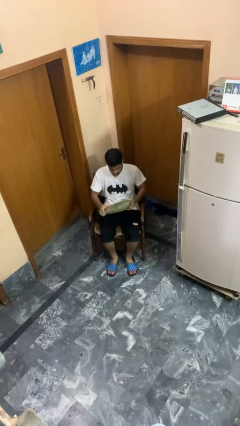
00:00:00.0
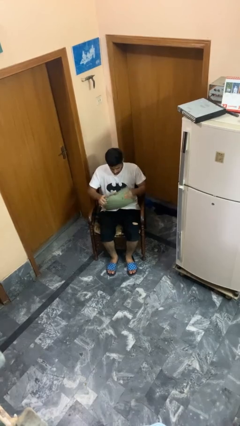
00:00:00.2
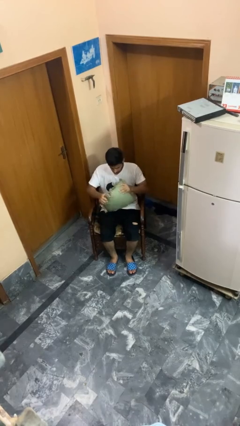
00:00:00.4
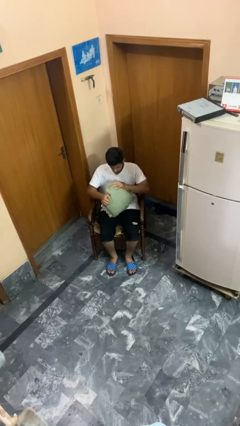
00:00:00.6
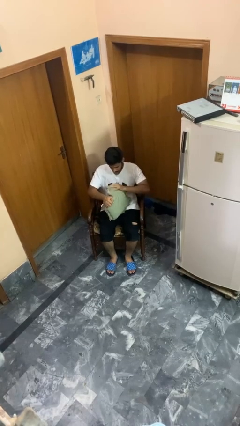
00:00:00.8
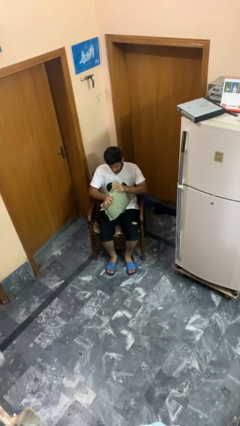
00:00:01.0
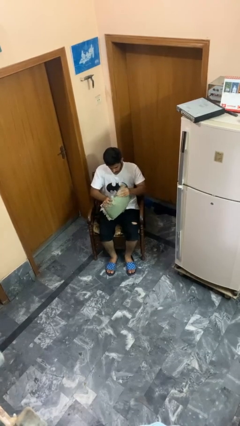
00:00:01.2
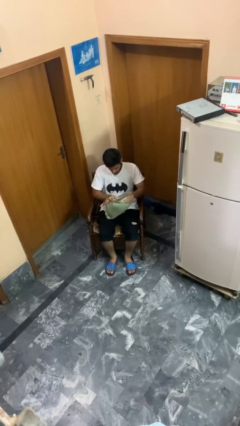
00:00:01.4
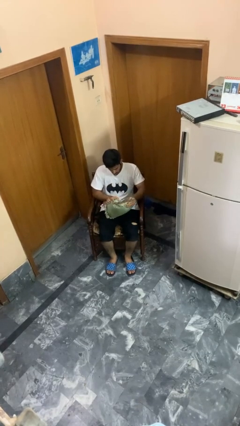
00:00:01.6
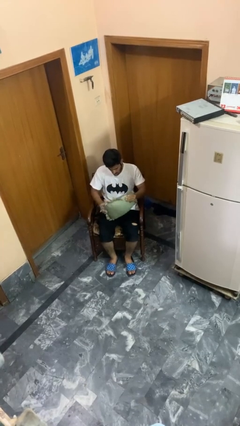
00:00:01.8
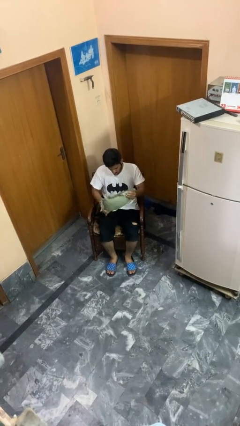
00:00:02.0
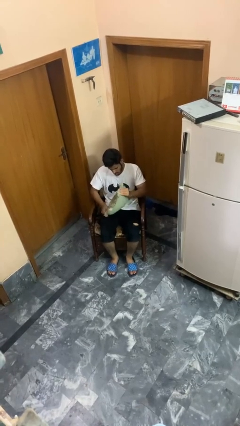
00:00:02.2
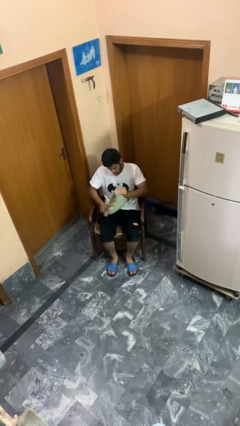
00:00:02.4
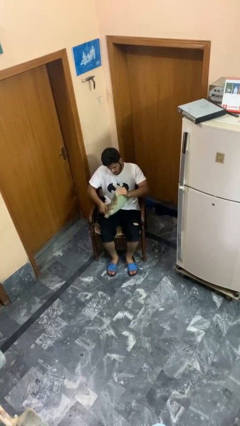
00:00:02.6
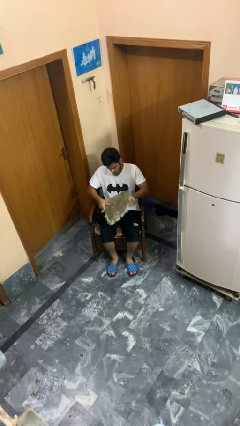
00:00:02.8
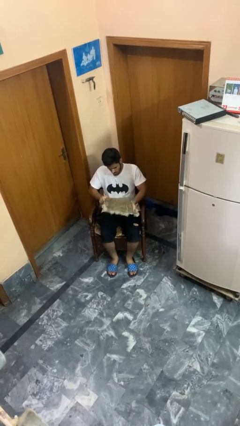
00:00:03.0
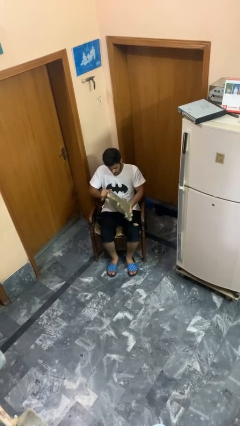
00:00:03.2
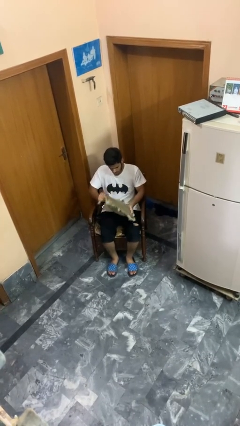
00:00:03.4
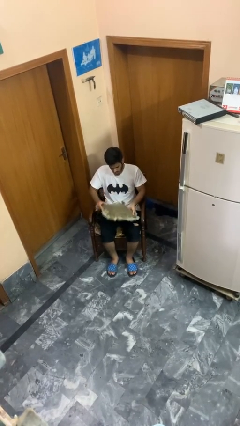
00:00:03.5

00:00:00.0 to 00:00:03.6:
person squeezes object

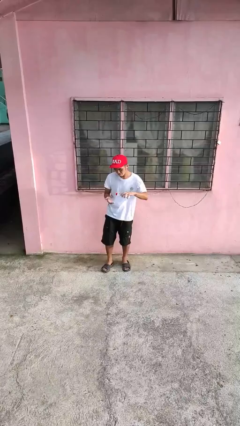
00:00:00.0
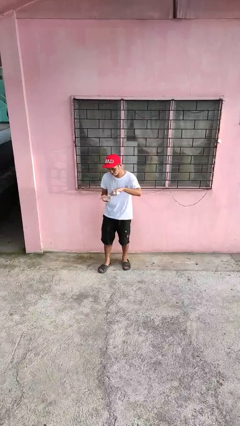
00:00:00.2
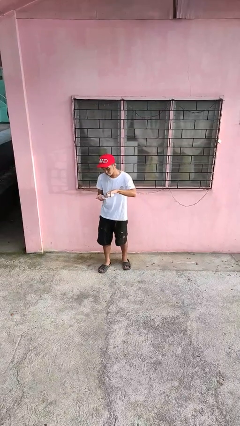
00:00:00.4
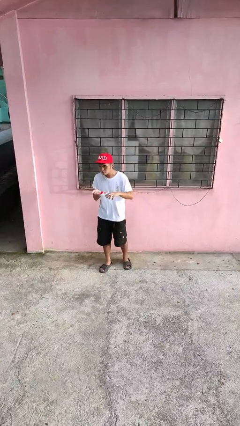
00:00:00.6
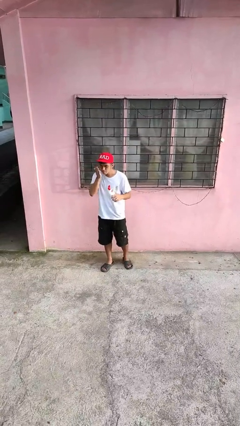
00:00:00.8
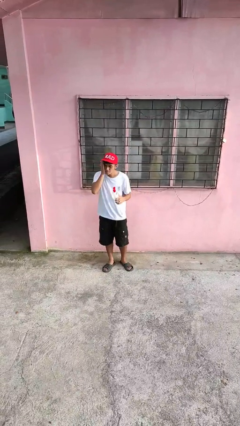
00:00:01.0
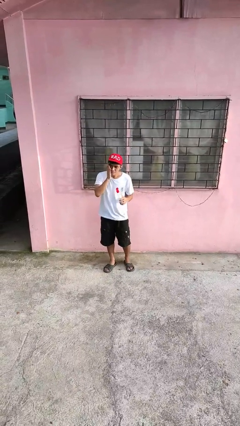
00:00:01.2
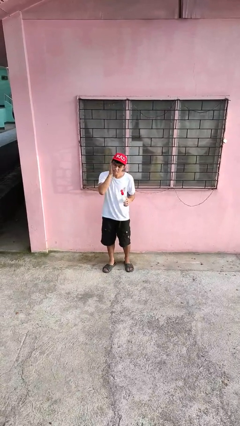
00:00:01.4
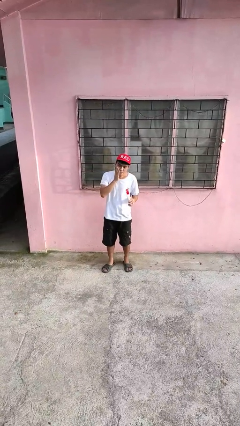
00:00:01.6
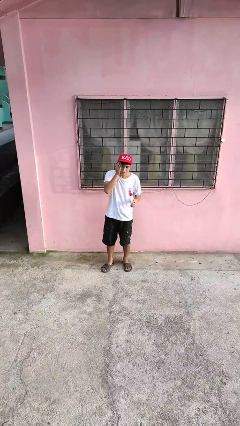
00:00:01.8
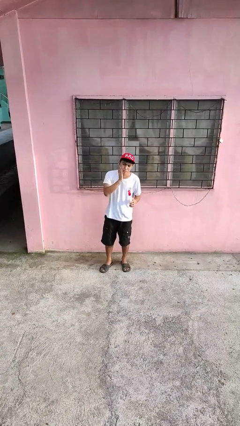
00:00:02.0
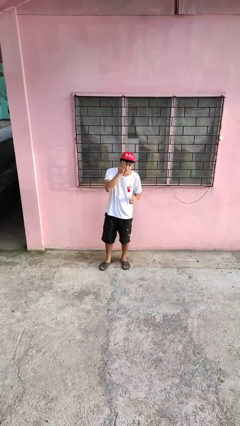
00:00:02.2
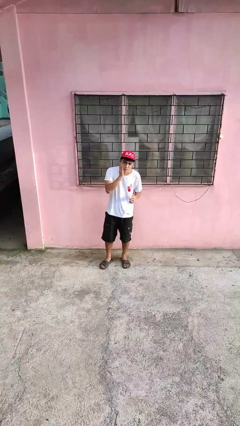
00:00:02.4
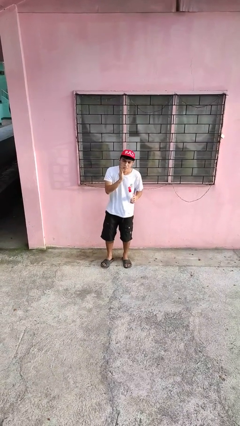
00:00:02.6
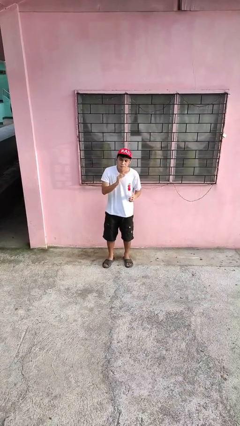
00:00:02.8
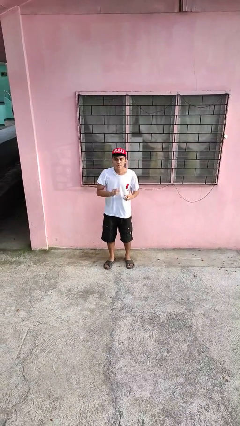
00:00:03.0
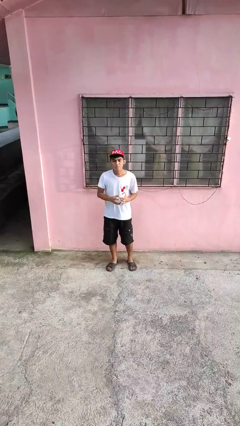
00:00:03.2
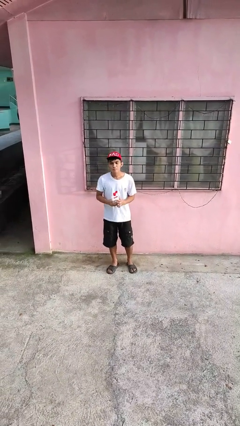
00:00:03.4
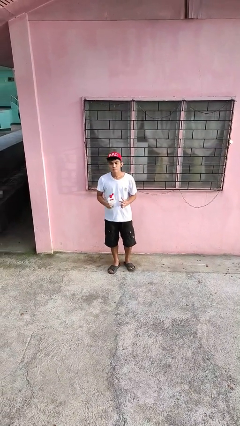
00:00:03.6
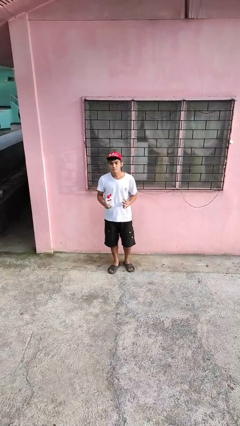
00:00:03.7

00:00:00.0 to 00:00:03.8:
person applies facial moisturizer

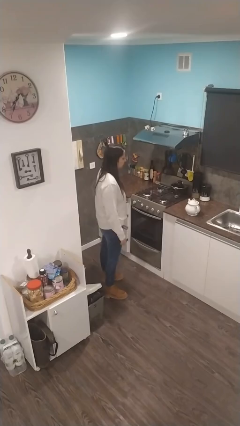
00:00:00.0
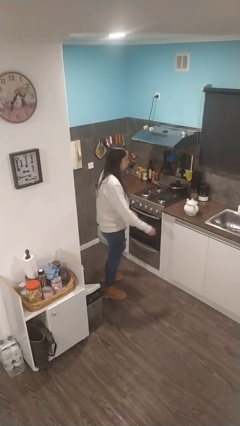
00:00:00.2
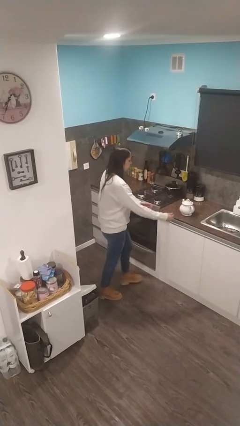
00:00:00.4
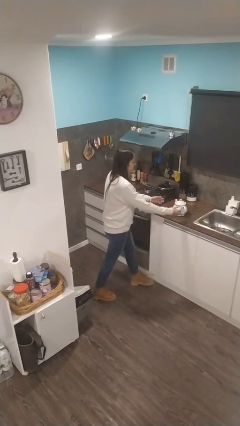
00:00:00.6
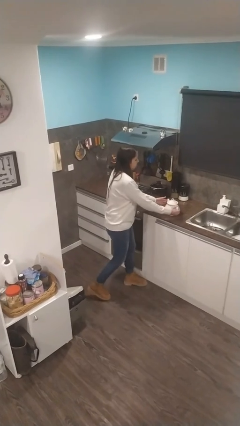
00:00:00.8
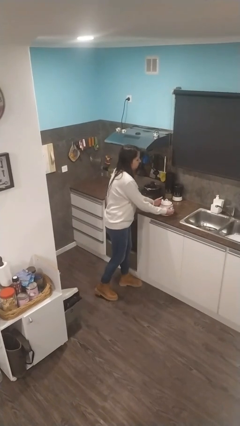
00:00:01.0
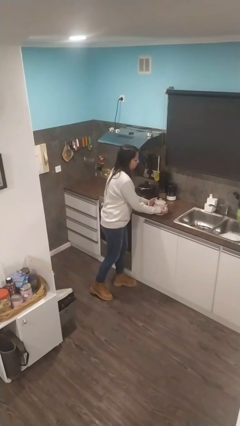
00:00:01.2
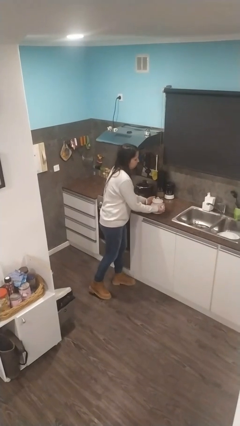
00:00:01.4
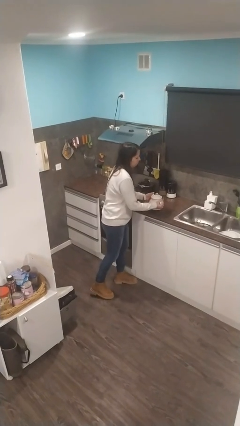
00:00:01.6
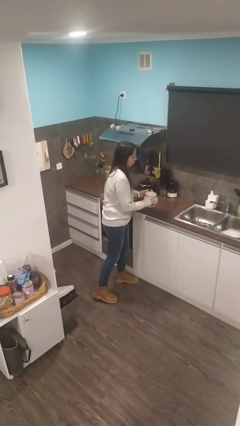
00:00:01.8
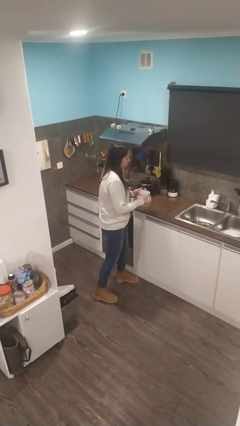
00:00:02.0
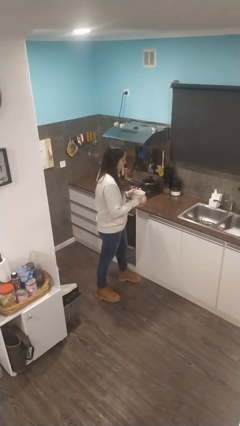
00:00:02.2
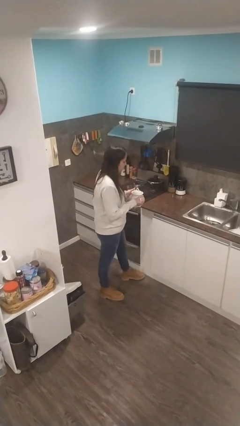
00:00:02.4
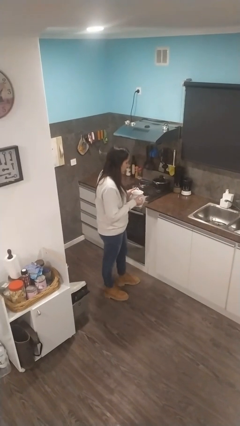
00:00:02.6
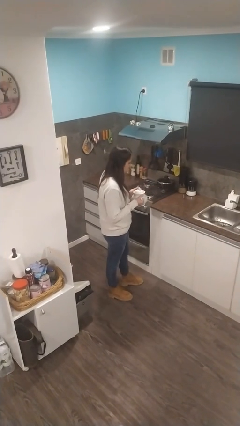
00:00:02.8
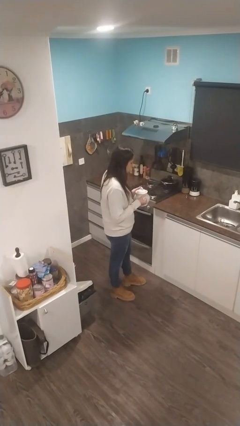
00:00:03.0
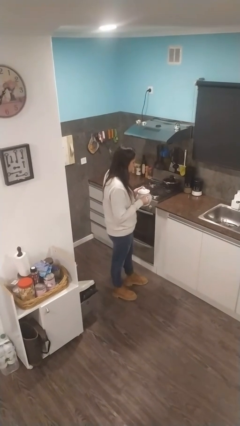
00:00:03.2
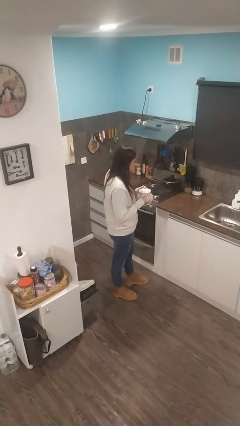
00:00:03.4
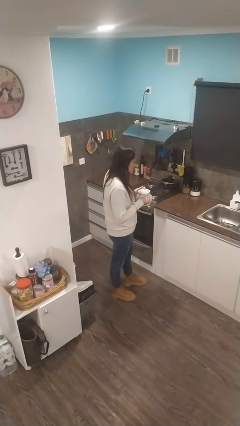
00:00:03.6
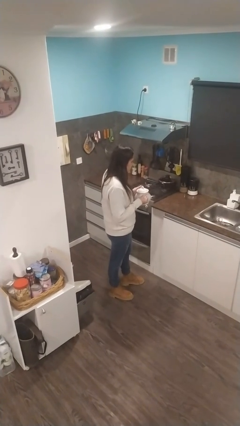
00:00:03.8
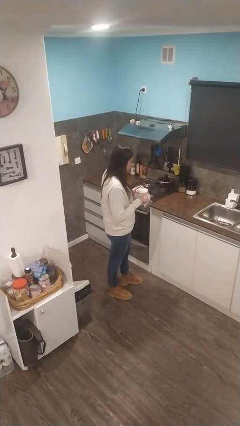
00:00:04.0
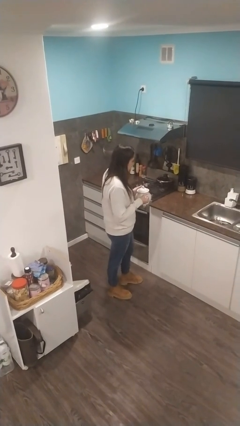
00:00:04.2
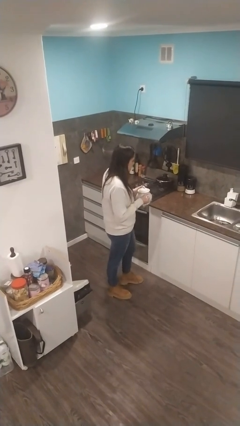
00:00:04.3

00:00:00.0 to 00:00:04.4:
person picks up object from countertop

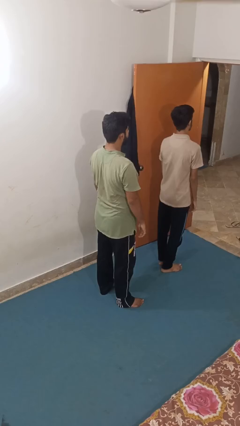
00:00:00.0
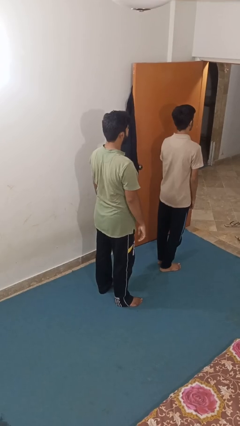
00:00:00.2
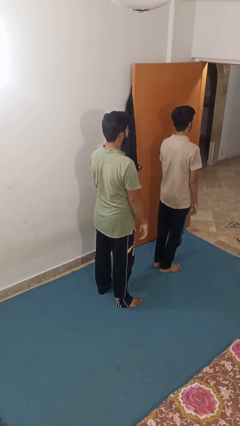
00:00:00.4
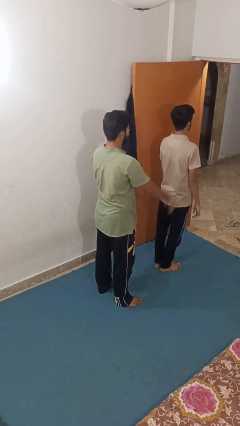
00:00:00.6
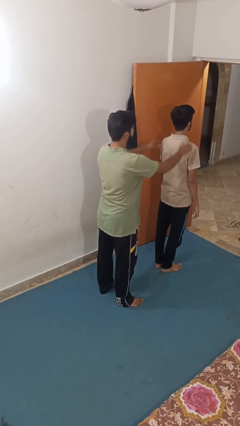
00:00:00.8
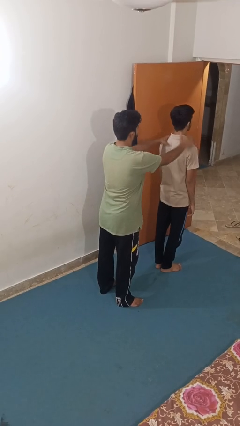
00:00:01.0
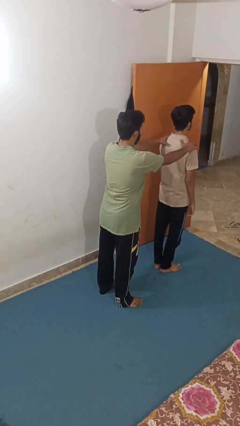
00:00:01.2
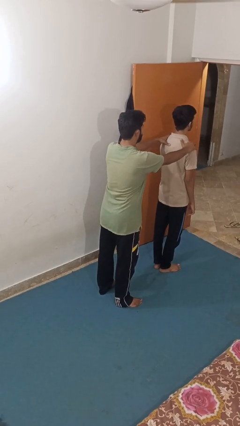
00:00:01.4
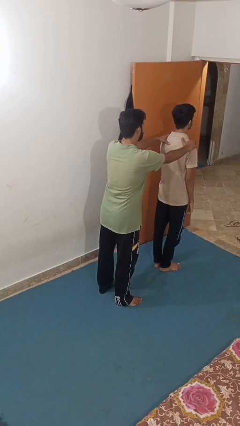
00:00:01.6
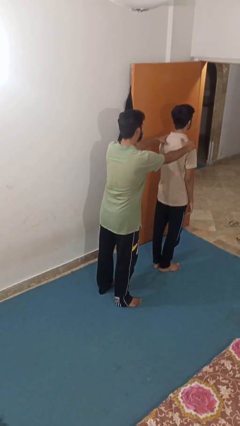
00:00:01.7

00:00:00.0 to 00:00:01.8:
person grabs person by shoulder

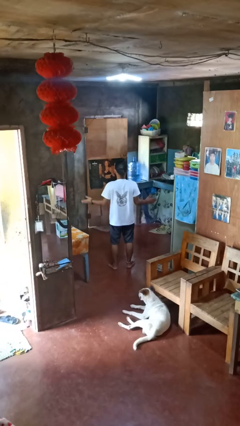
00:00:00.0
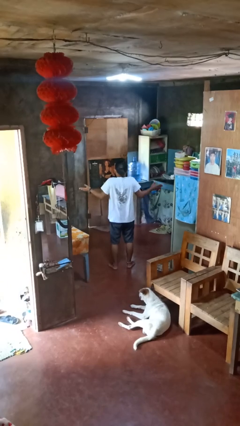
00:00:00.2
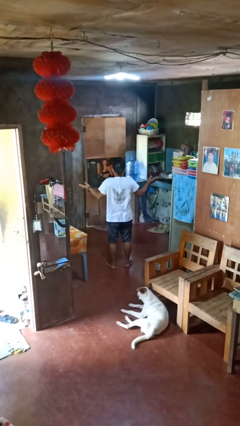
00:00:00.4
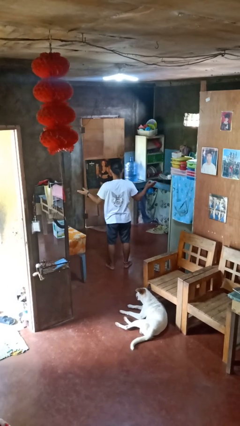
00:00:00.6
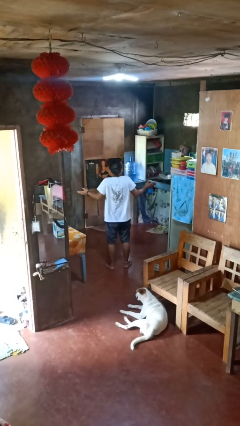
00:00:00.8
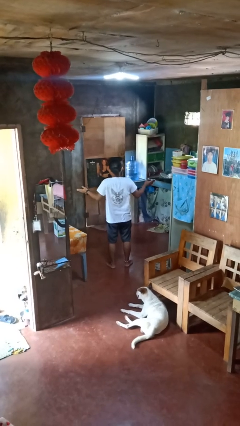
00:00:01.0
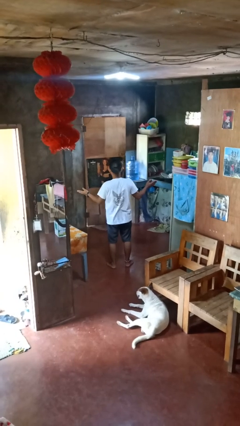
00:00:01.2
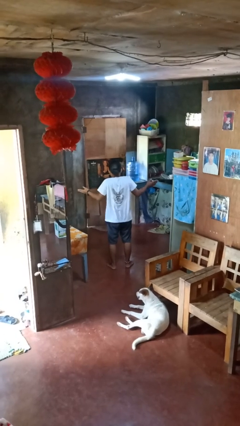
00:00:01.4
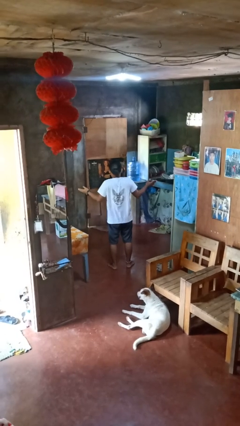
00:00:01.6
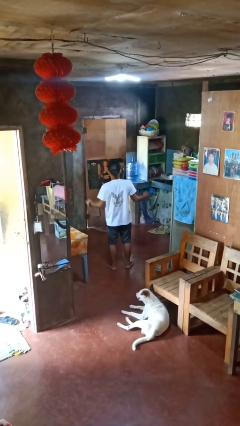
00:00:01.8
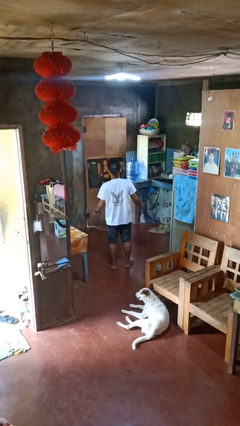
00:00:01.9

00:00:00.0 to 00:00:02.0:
person shrugs

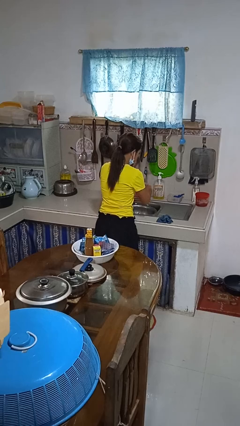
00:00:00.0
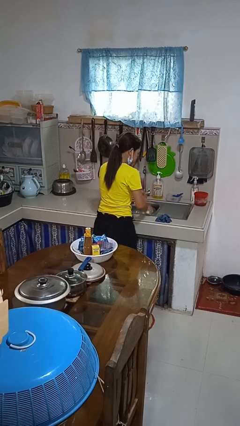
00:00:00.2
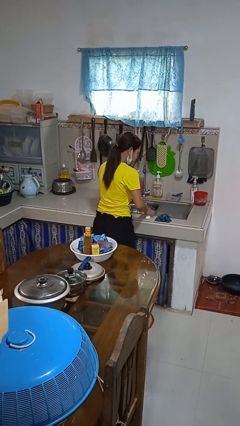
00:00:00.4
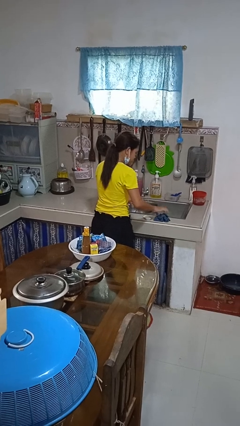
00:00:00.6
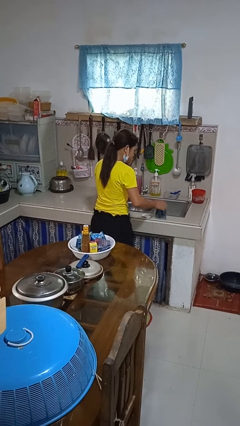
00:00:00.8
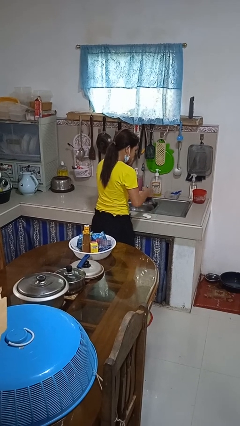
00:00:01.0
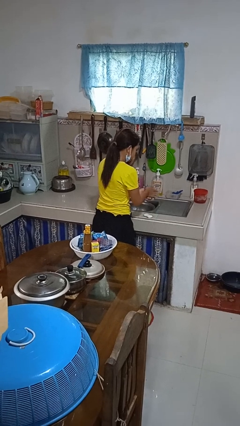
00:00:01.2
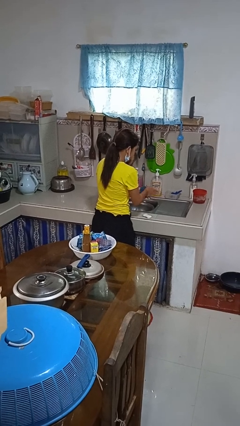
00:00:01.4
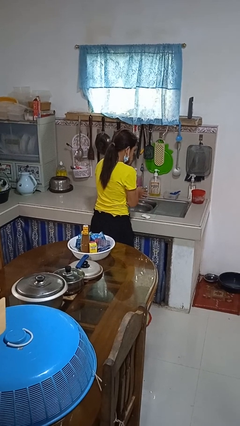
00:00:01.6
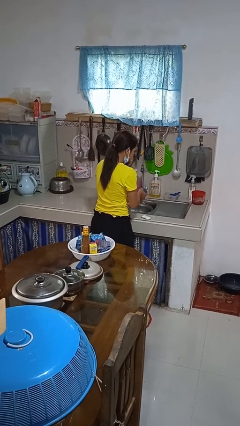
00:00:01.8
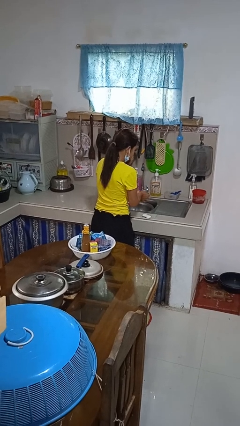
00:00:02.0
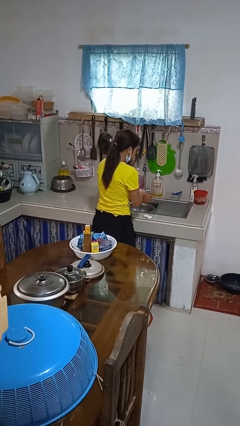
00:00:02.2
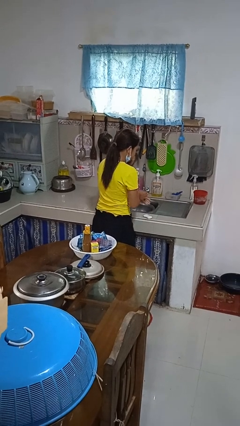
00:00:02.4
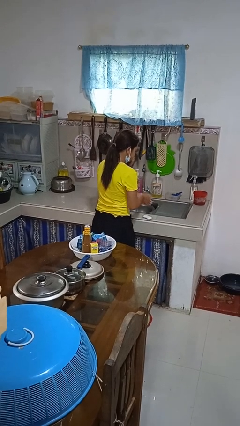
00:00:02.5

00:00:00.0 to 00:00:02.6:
person dries hands with towel
